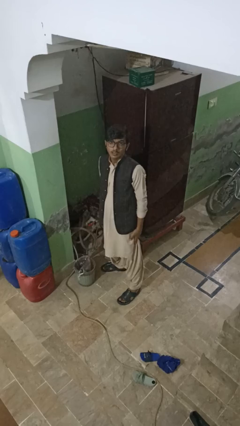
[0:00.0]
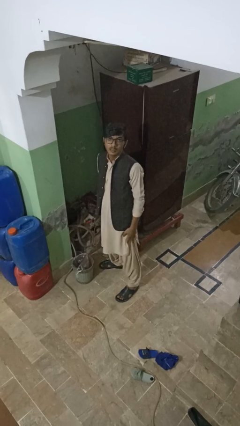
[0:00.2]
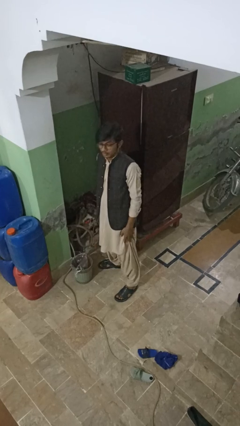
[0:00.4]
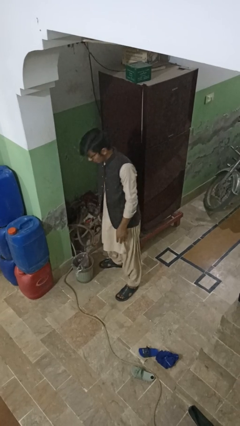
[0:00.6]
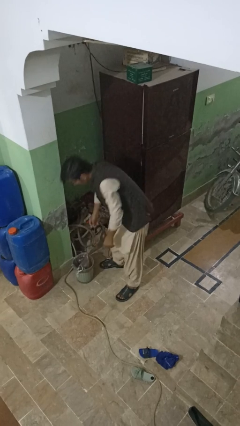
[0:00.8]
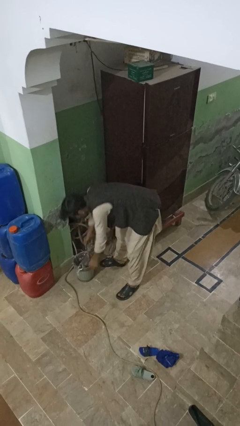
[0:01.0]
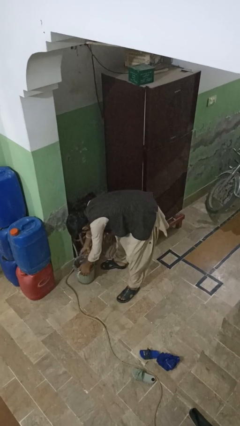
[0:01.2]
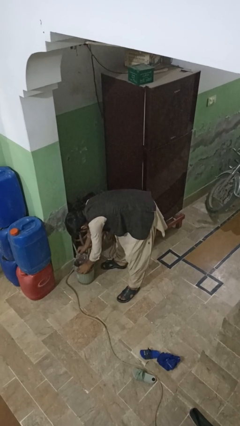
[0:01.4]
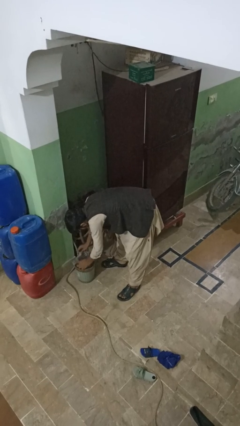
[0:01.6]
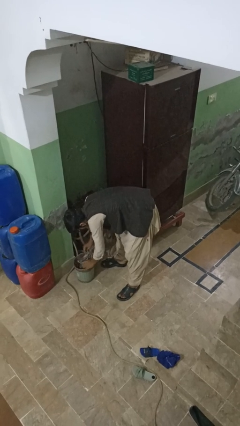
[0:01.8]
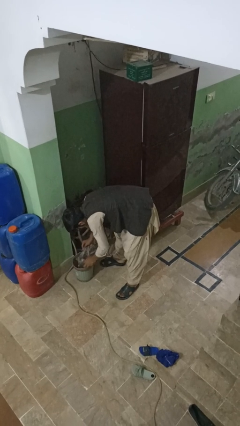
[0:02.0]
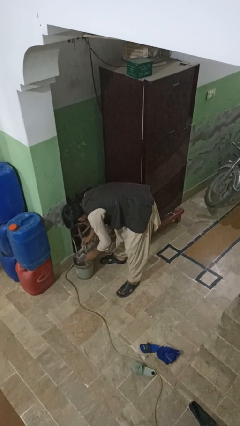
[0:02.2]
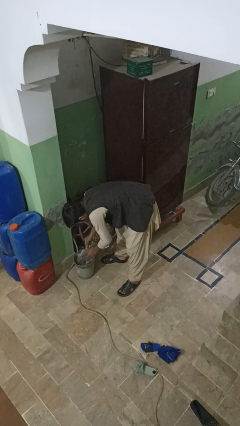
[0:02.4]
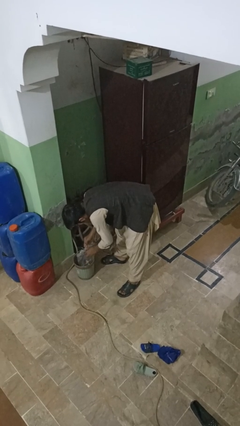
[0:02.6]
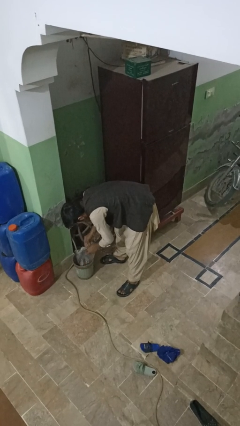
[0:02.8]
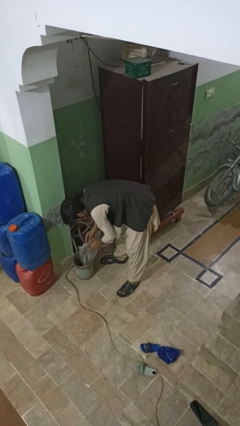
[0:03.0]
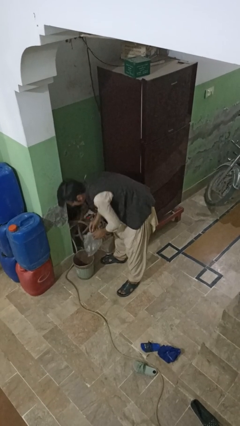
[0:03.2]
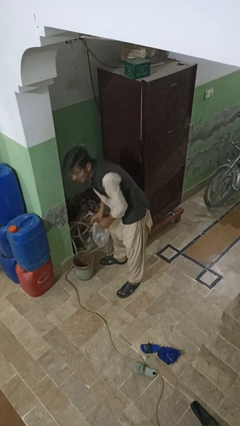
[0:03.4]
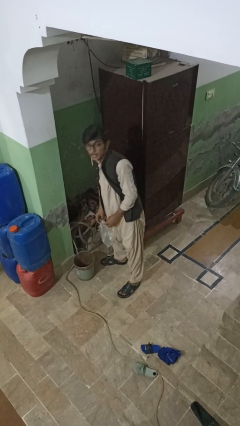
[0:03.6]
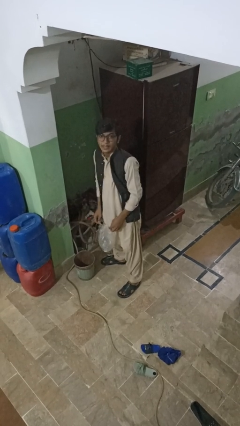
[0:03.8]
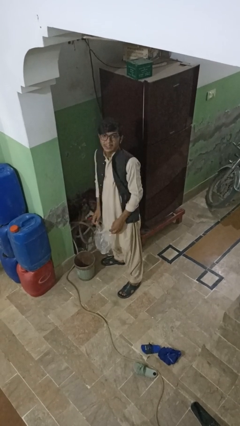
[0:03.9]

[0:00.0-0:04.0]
person removes trashbag from trashcan

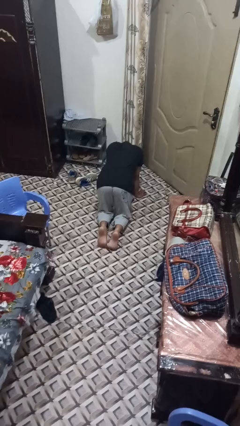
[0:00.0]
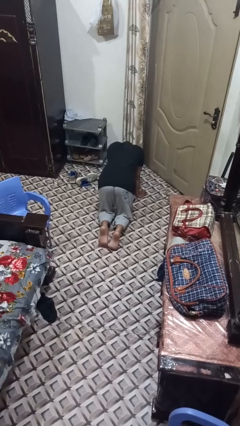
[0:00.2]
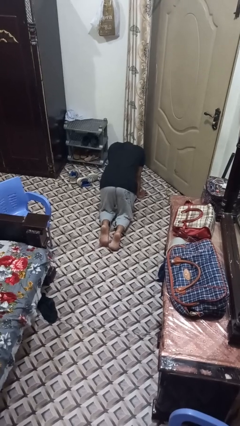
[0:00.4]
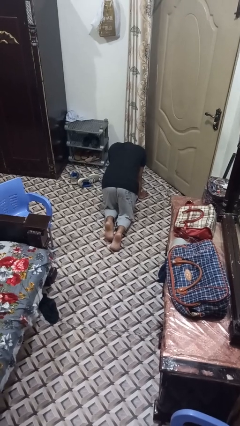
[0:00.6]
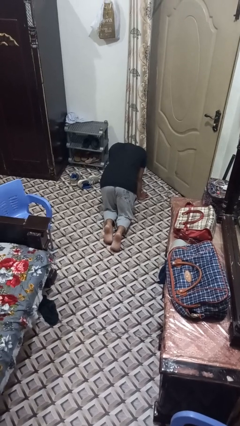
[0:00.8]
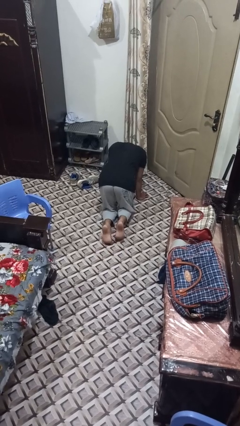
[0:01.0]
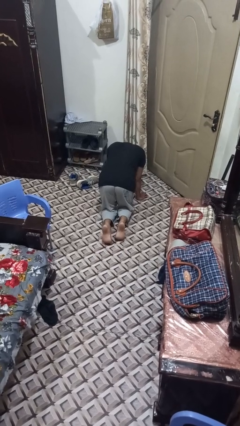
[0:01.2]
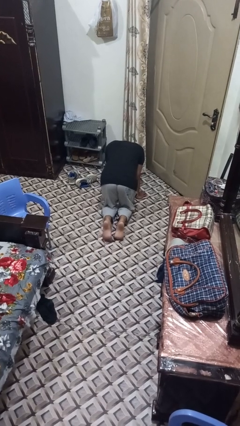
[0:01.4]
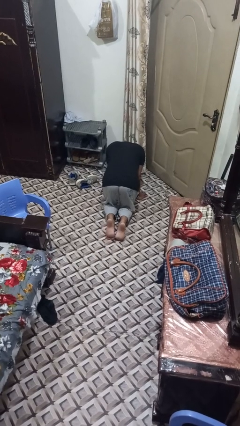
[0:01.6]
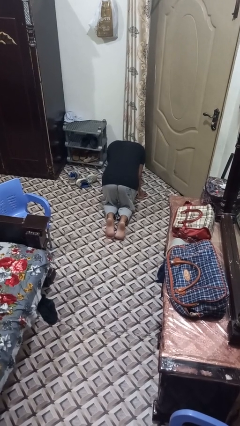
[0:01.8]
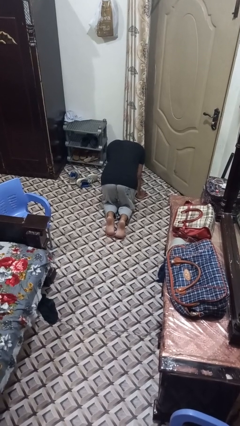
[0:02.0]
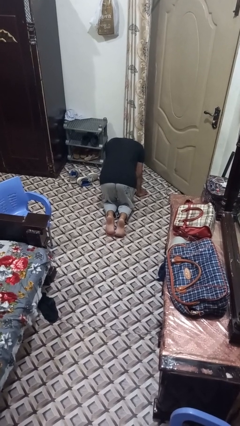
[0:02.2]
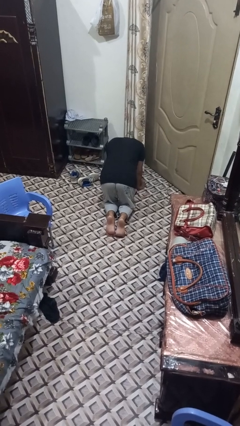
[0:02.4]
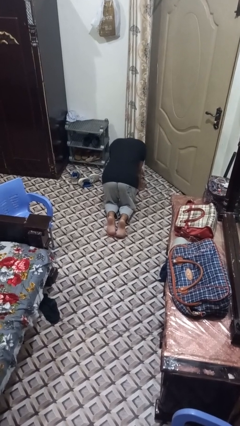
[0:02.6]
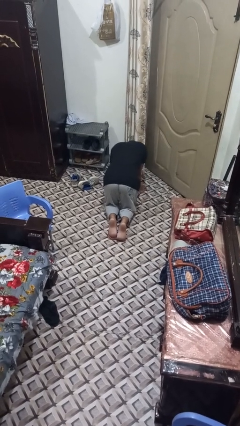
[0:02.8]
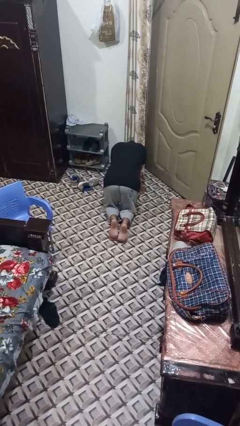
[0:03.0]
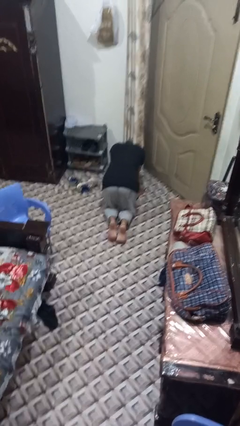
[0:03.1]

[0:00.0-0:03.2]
person crawls

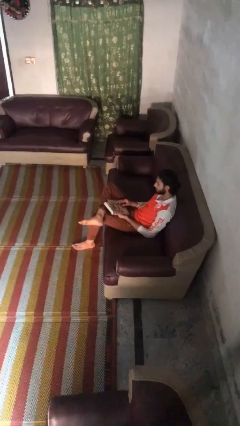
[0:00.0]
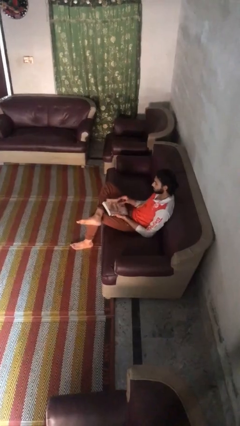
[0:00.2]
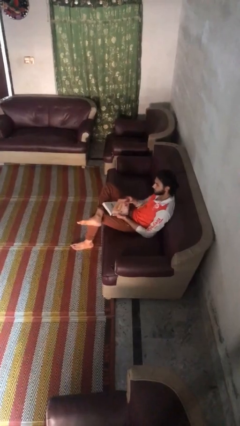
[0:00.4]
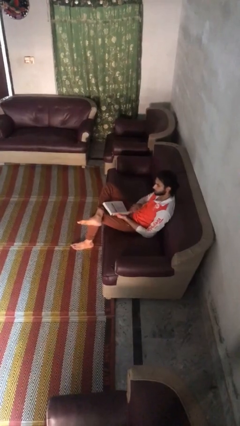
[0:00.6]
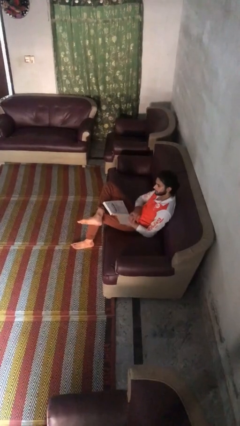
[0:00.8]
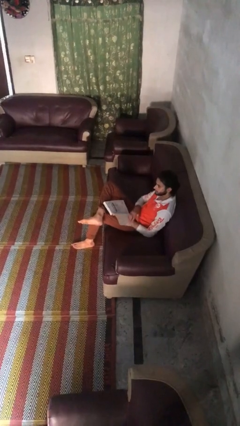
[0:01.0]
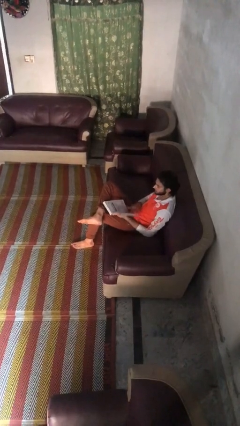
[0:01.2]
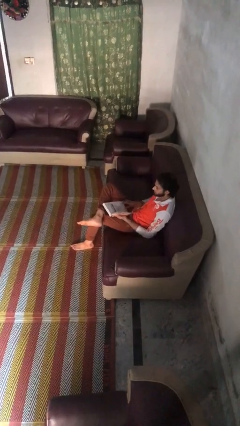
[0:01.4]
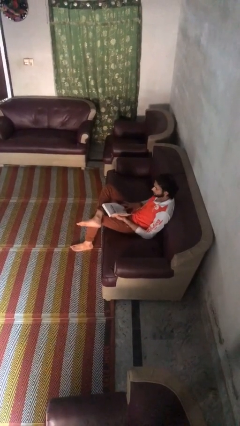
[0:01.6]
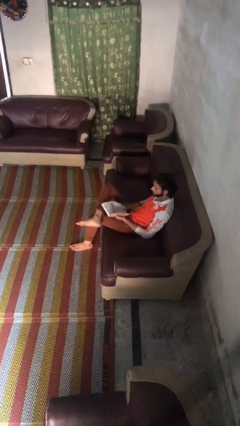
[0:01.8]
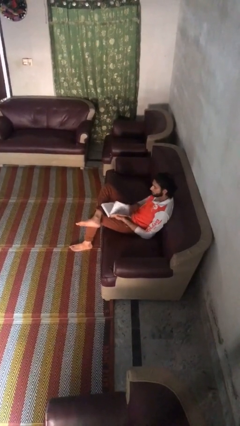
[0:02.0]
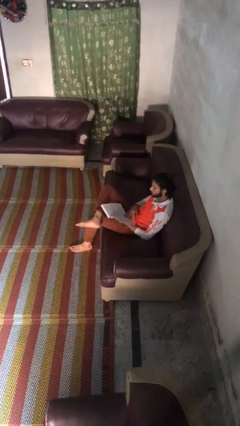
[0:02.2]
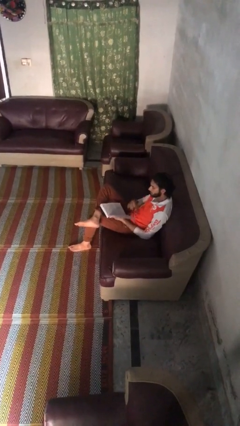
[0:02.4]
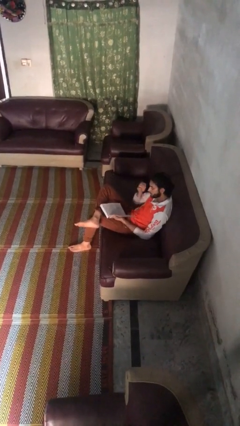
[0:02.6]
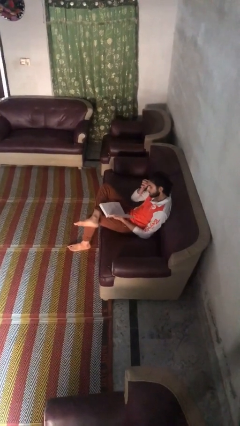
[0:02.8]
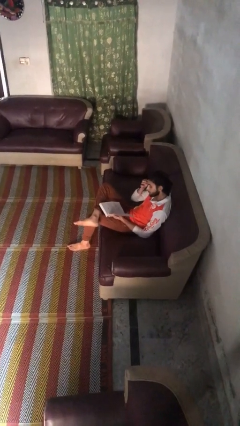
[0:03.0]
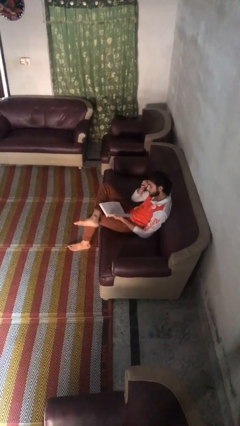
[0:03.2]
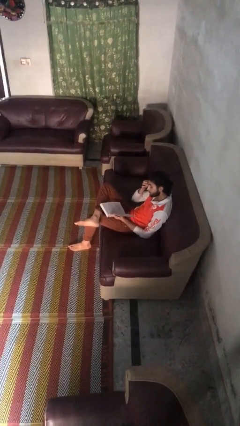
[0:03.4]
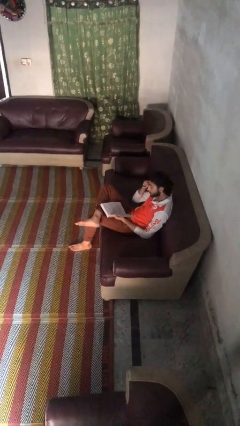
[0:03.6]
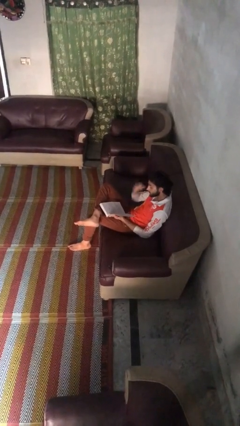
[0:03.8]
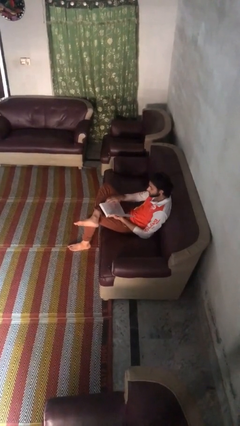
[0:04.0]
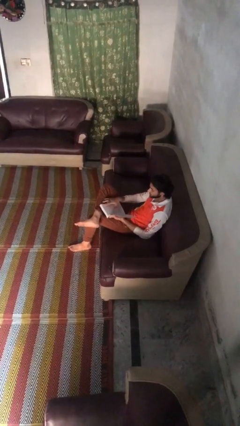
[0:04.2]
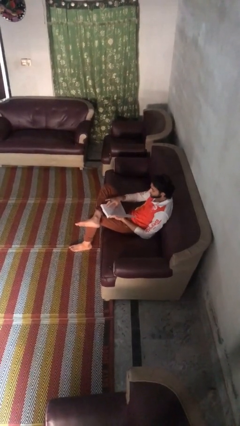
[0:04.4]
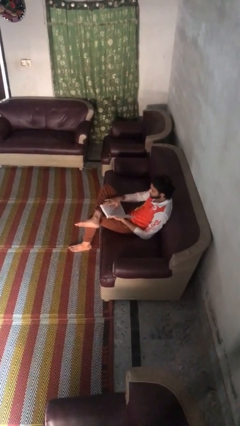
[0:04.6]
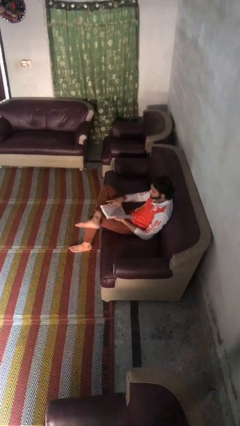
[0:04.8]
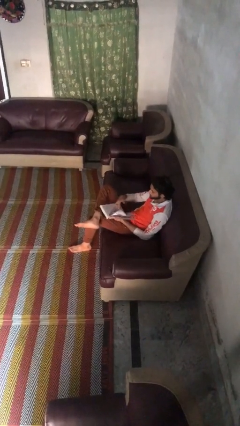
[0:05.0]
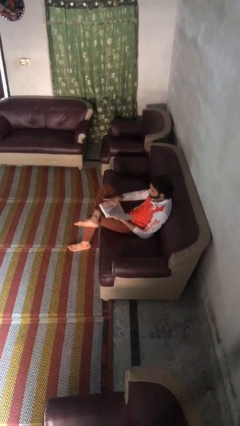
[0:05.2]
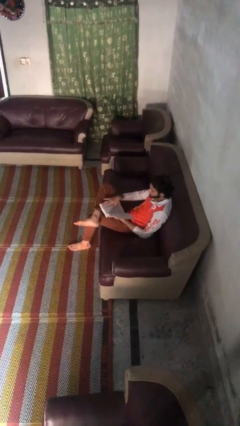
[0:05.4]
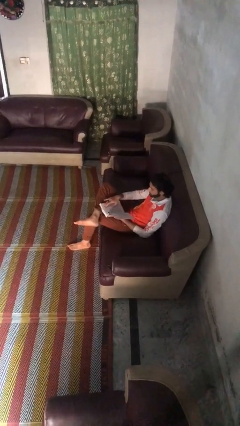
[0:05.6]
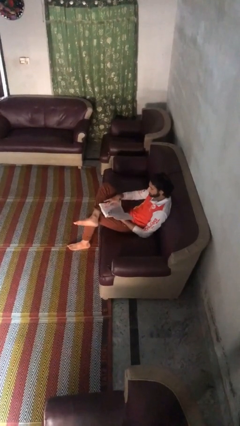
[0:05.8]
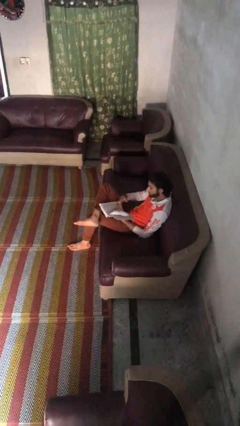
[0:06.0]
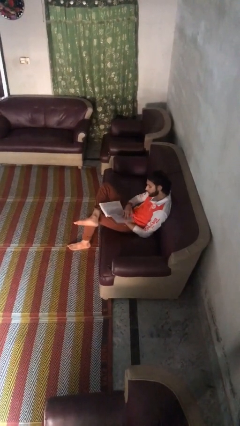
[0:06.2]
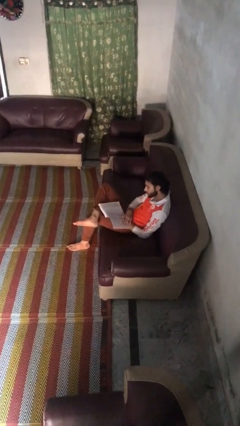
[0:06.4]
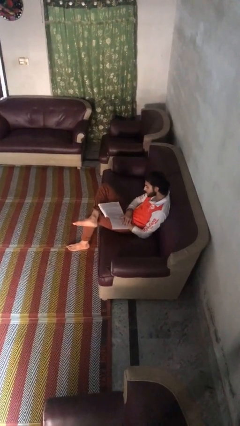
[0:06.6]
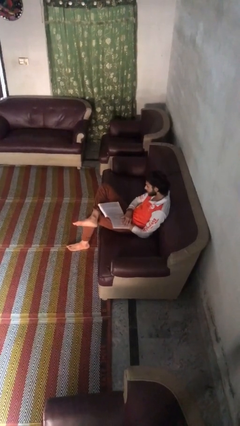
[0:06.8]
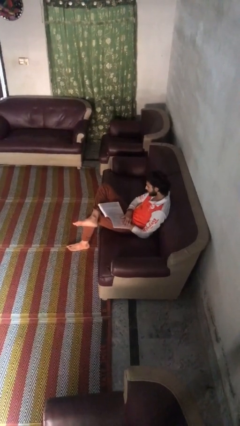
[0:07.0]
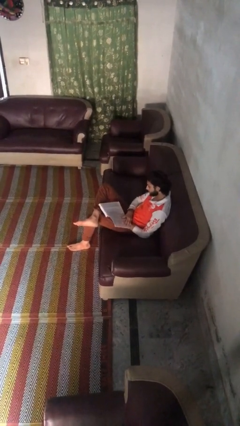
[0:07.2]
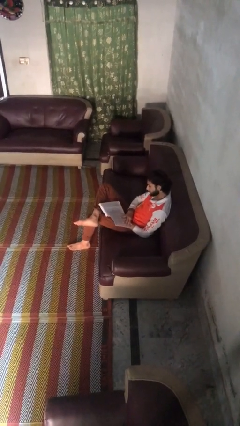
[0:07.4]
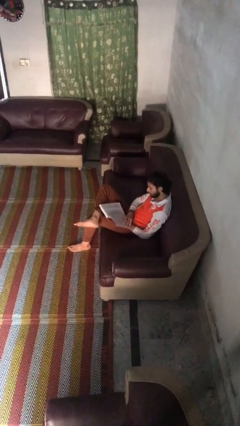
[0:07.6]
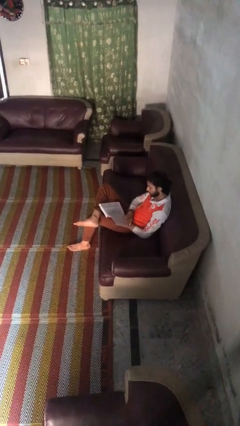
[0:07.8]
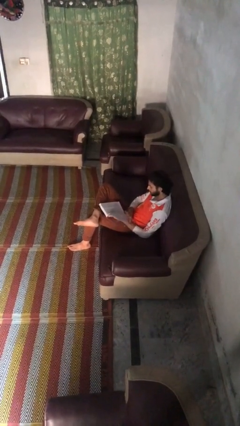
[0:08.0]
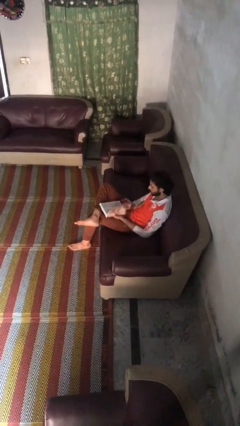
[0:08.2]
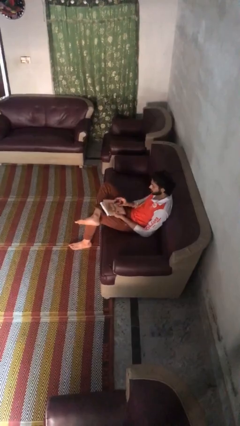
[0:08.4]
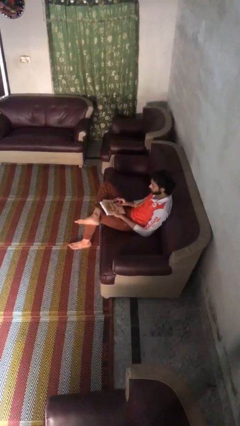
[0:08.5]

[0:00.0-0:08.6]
person reads book

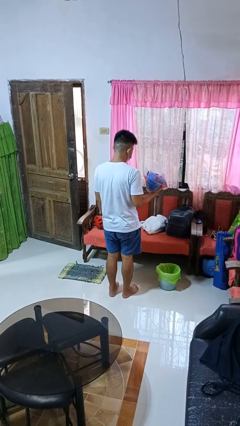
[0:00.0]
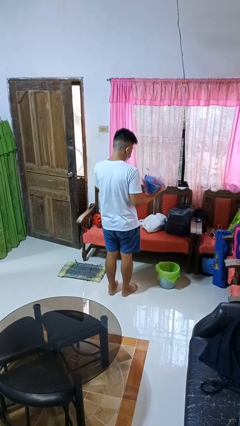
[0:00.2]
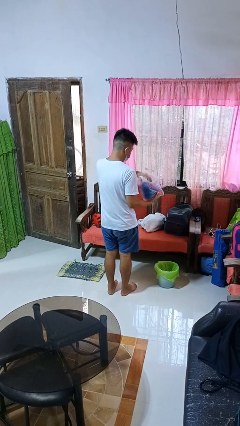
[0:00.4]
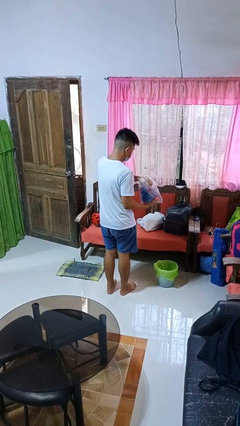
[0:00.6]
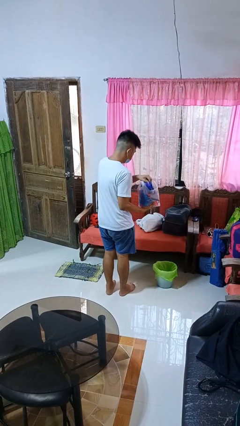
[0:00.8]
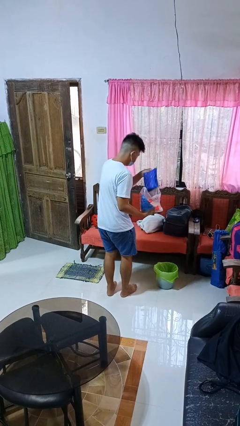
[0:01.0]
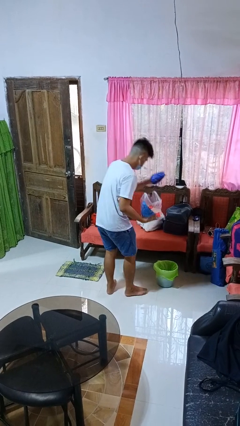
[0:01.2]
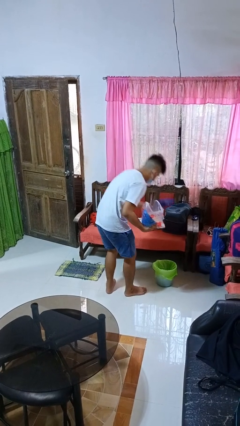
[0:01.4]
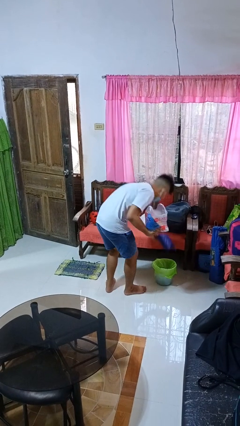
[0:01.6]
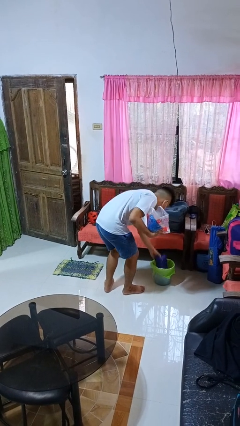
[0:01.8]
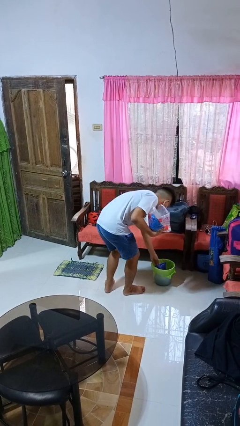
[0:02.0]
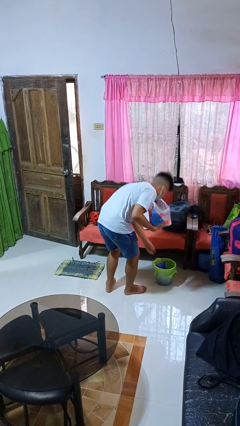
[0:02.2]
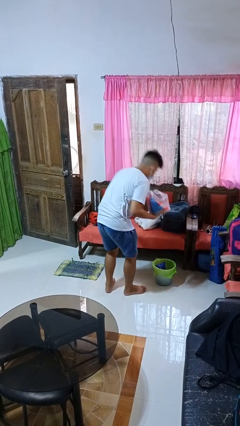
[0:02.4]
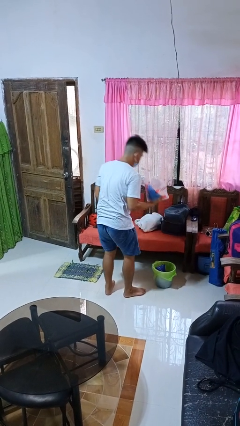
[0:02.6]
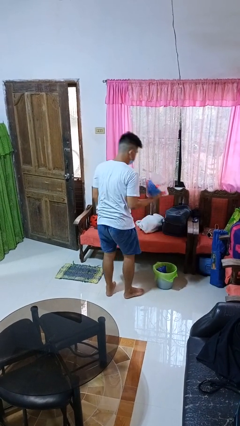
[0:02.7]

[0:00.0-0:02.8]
person discards trash
